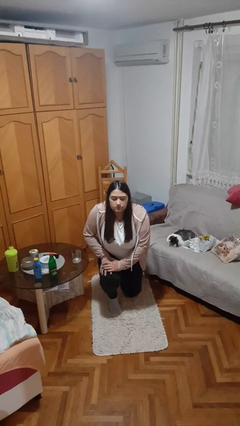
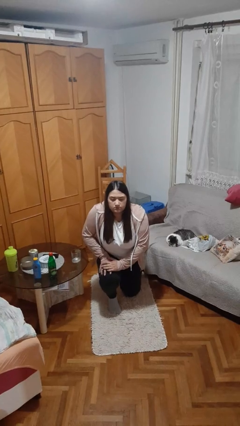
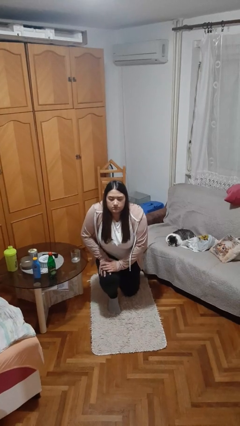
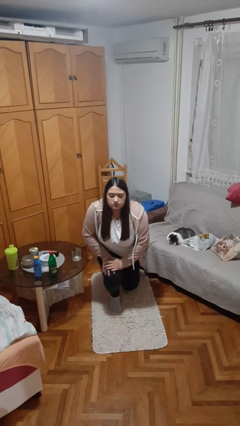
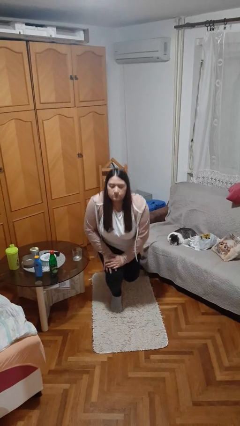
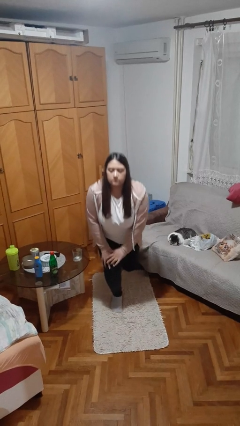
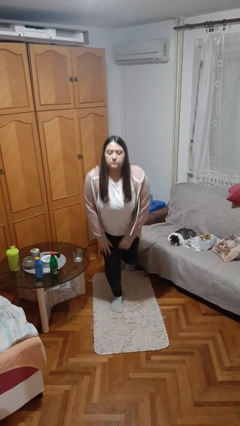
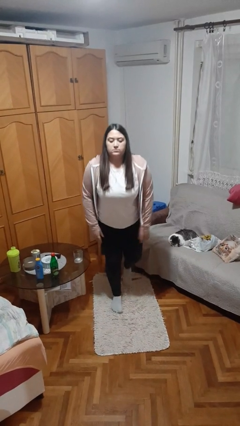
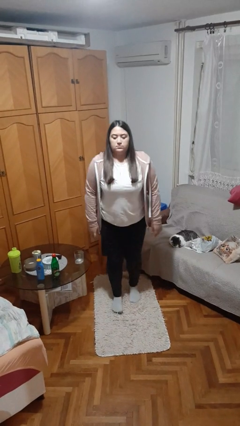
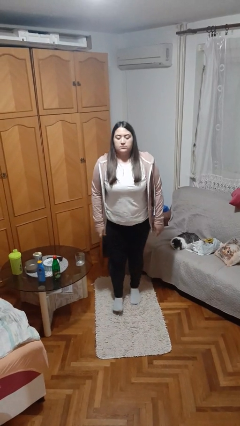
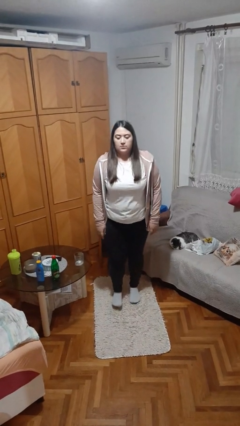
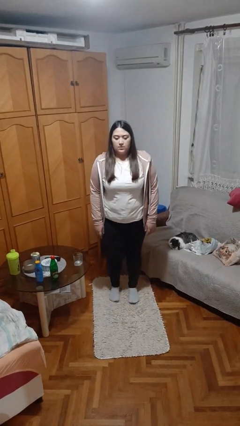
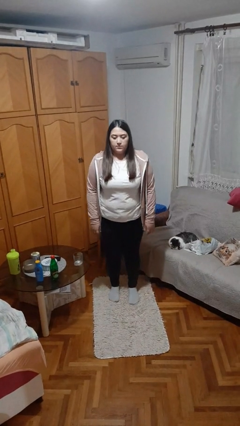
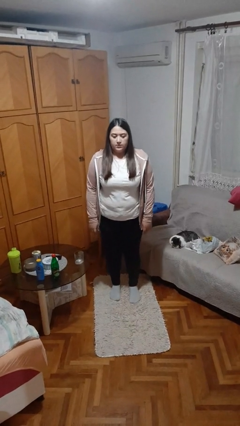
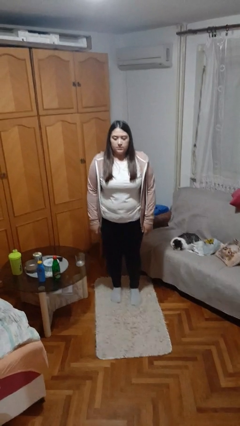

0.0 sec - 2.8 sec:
person stands up from floor

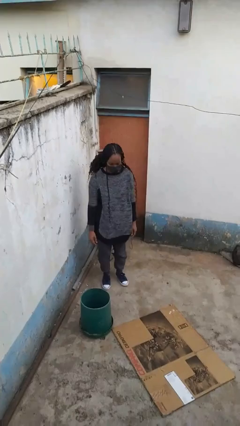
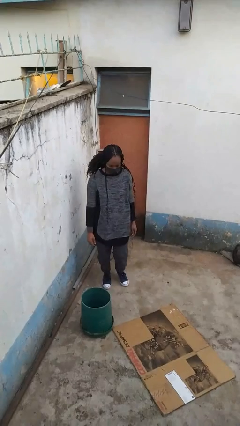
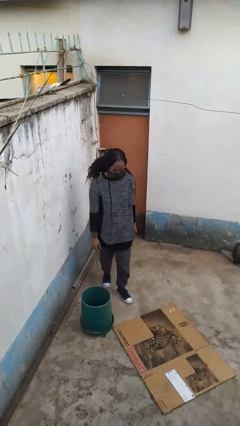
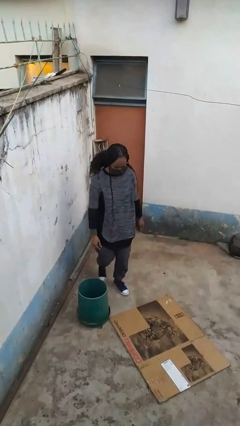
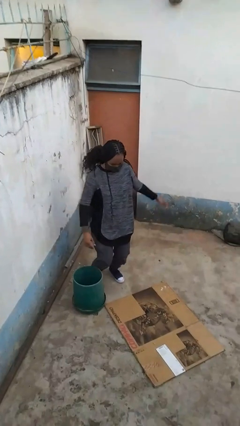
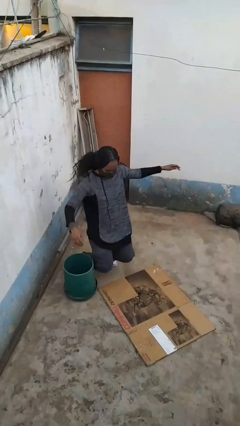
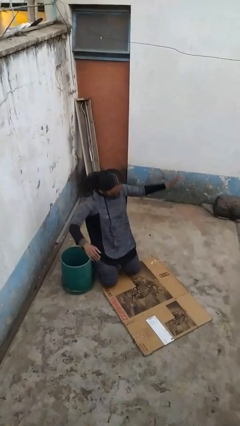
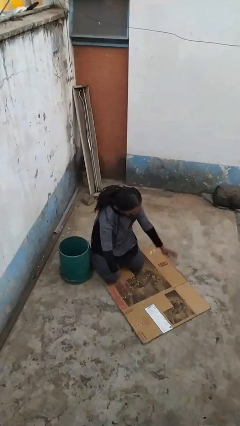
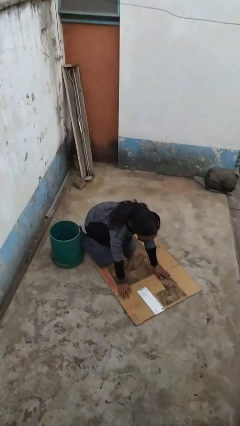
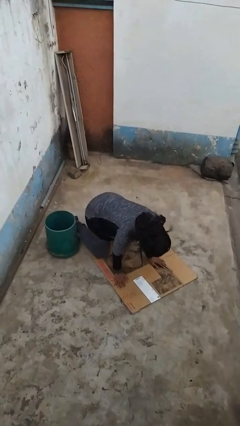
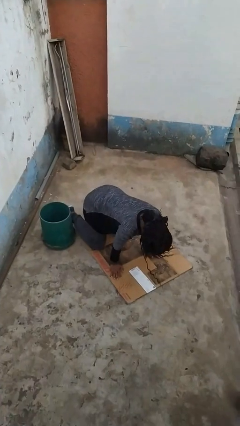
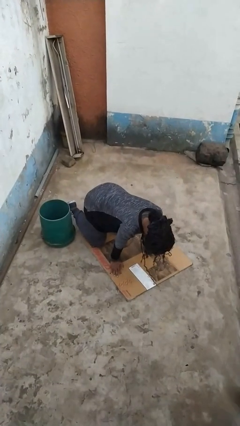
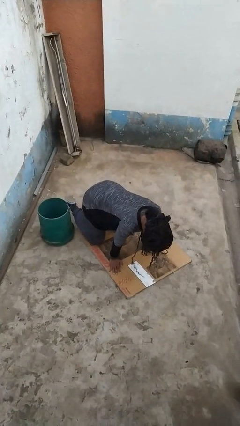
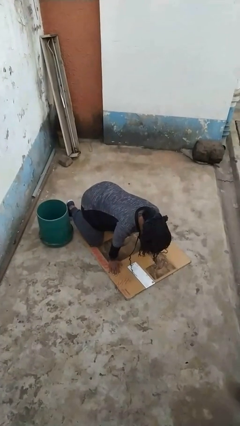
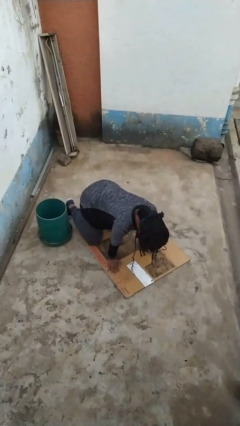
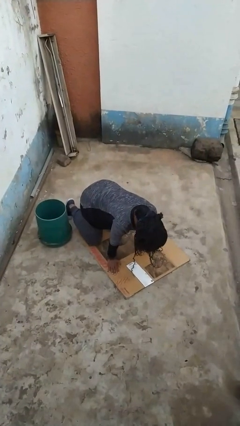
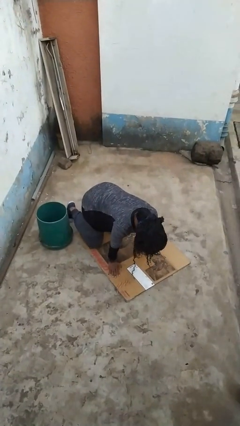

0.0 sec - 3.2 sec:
person trips on object on floor

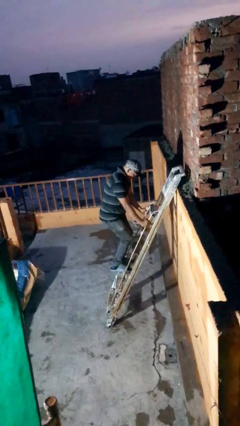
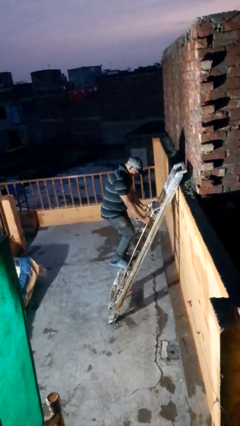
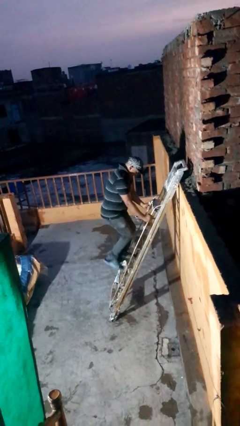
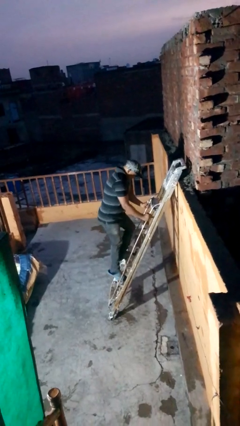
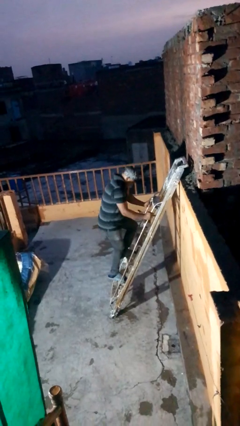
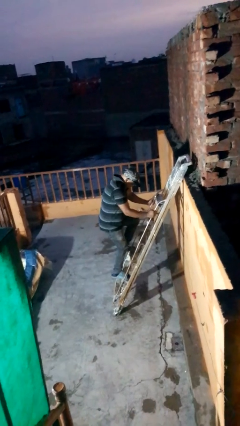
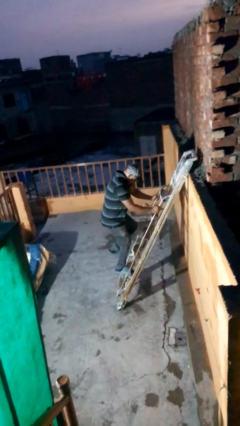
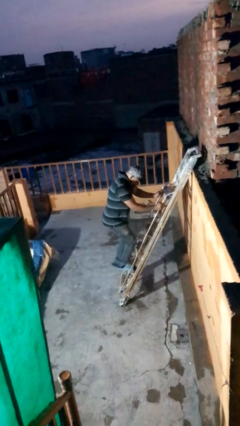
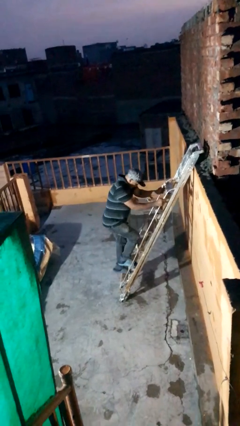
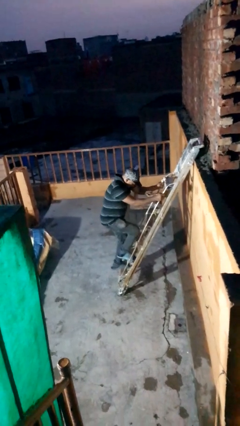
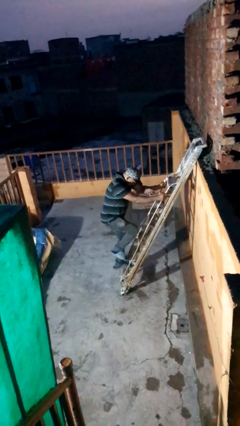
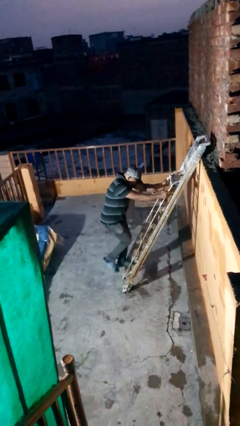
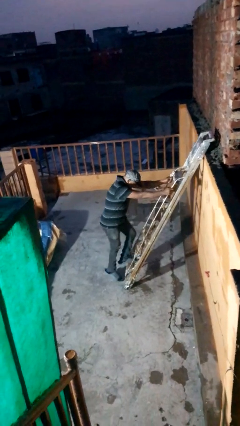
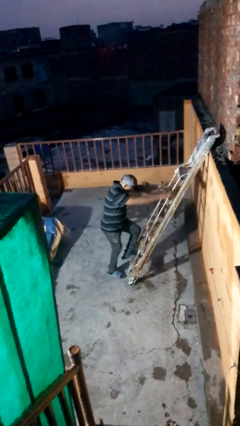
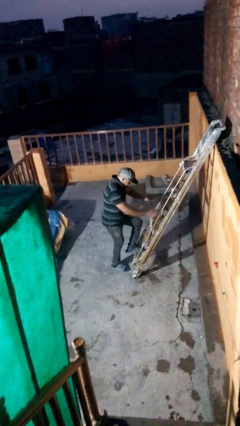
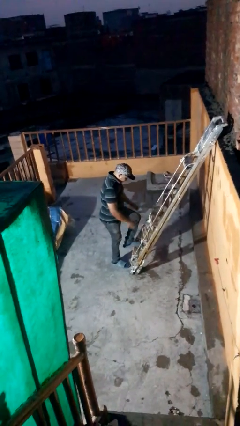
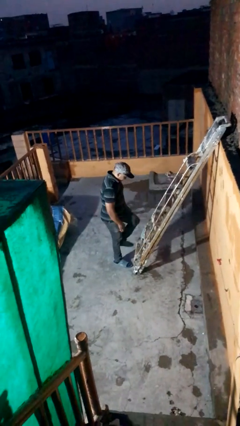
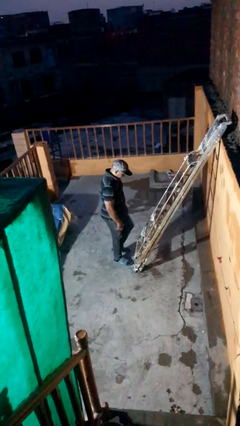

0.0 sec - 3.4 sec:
person climbs down ladder

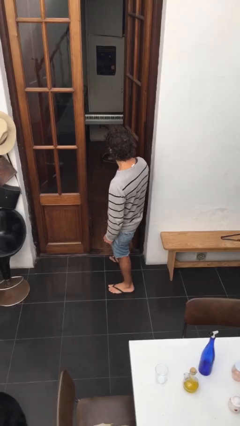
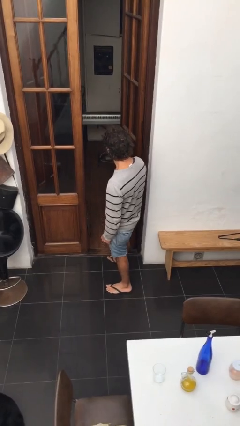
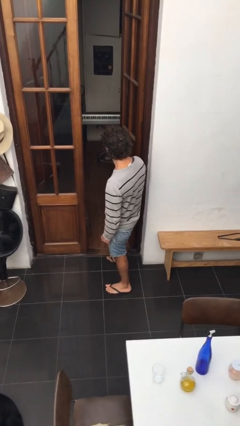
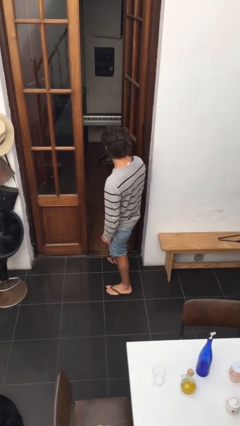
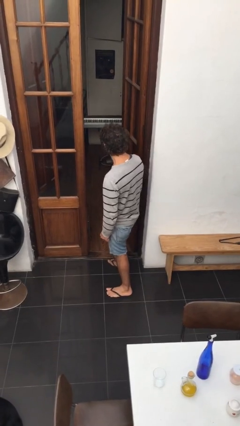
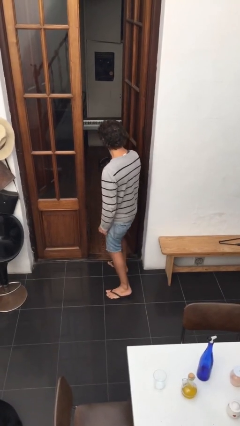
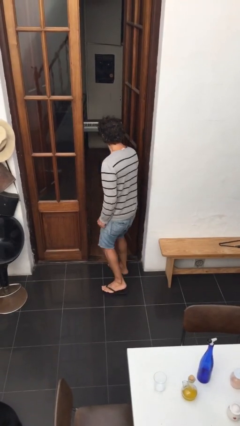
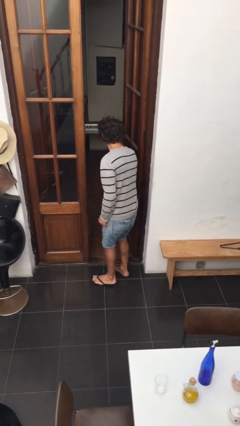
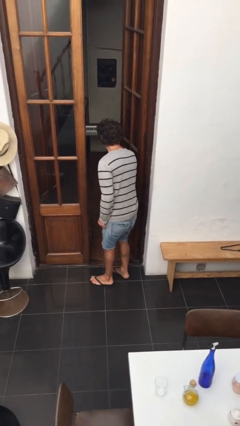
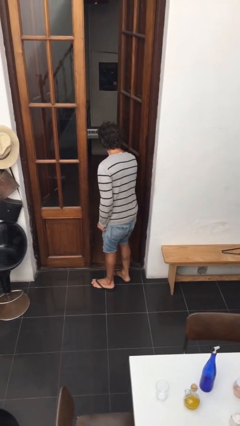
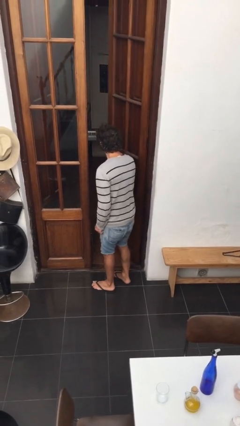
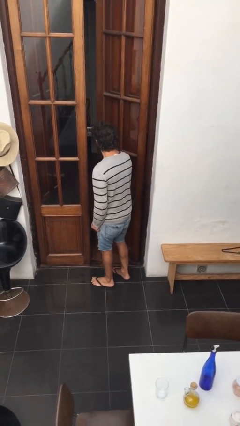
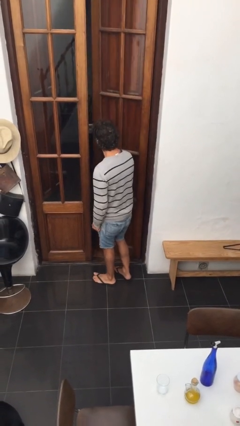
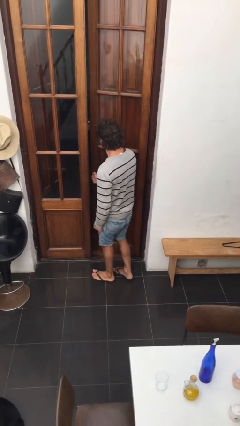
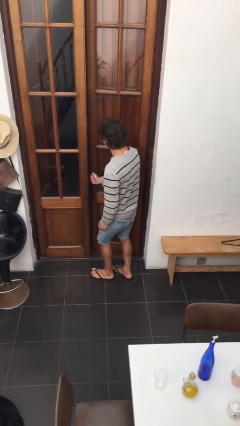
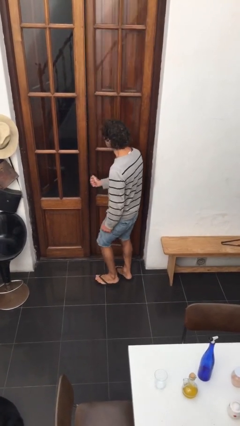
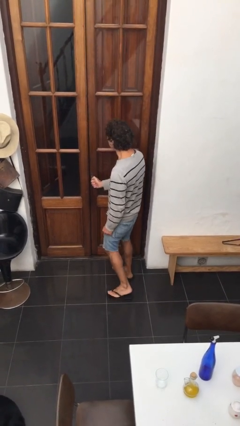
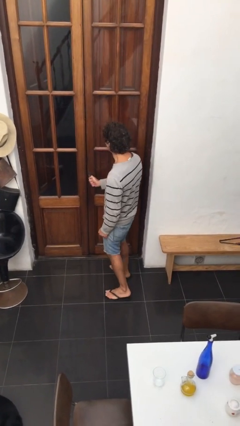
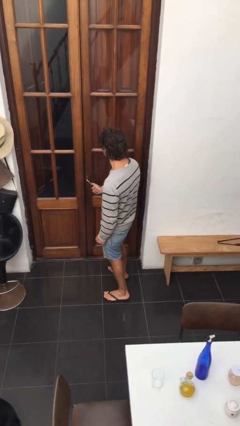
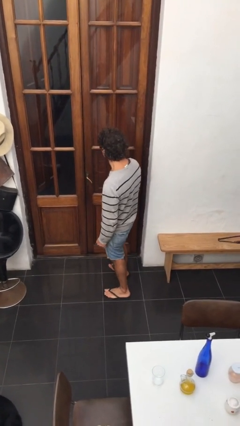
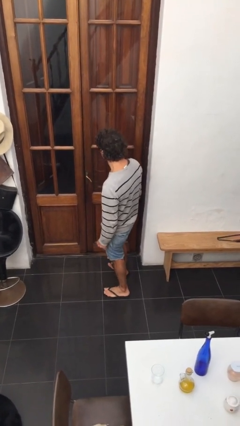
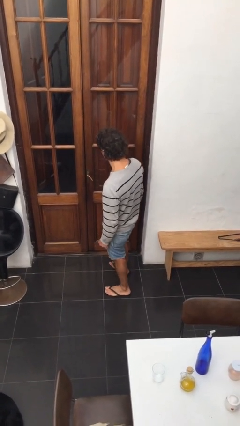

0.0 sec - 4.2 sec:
person closes facility door

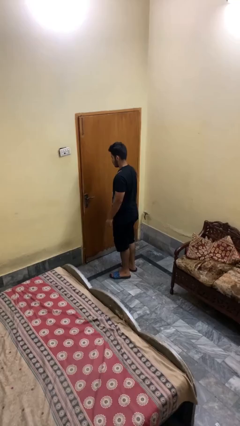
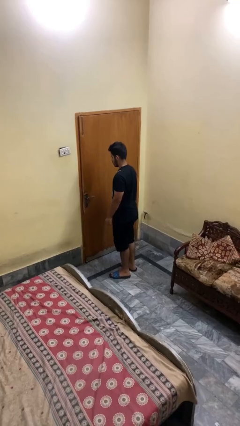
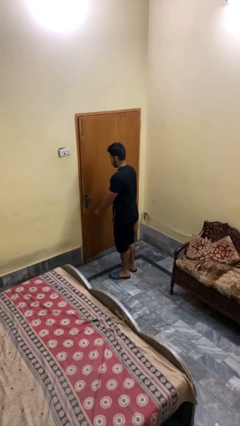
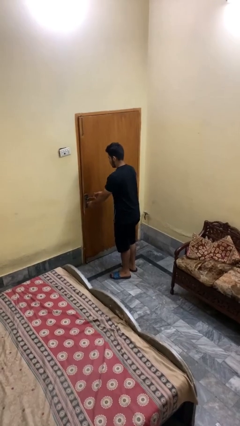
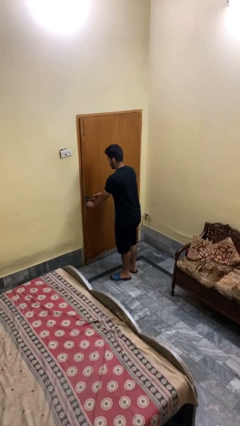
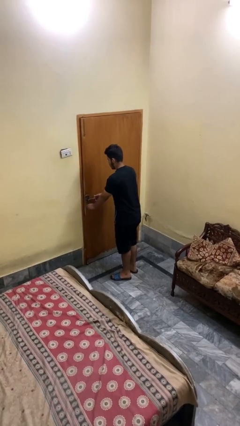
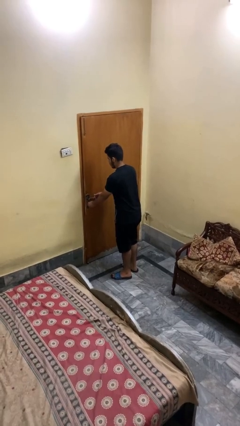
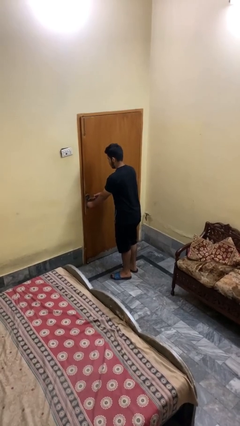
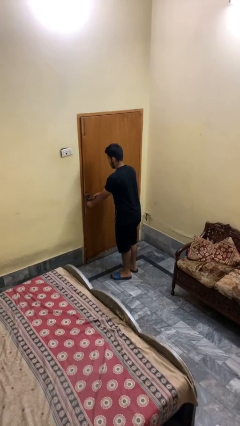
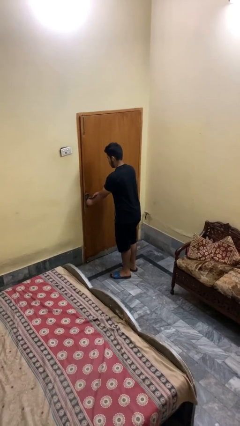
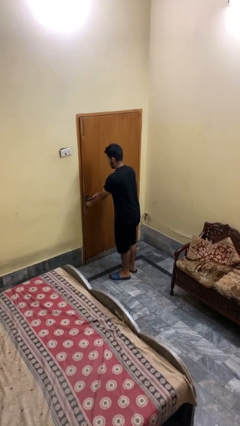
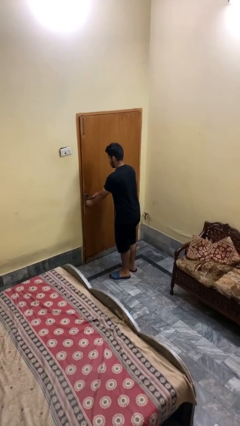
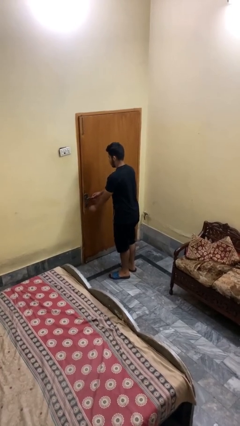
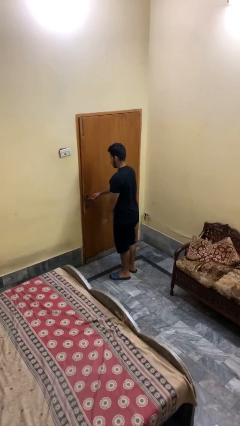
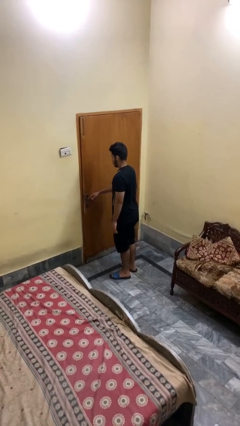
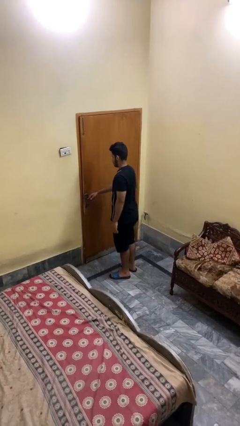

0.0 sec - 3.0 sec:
person unlocks door with keys

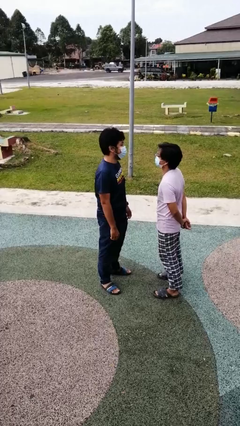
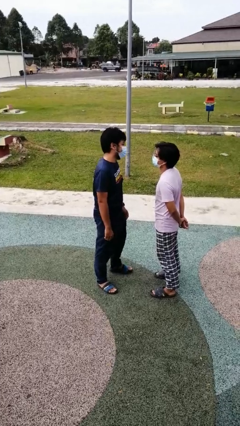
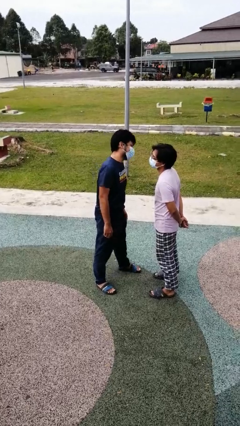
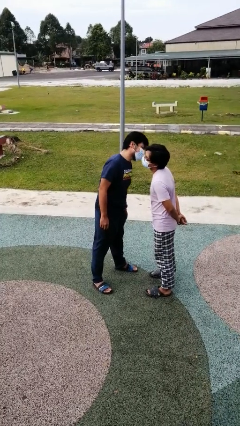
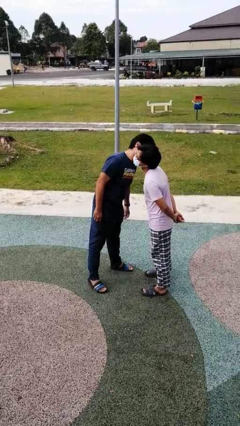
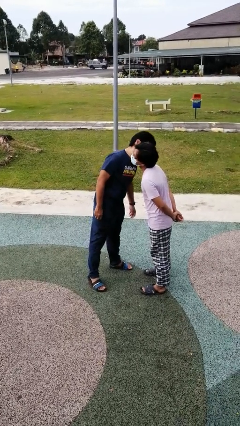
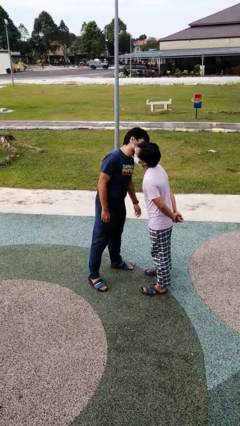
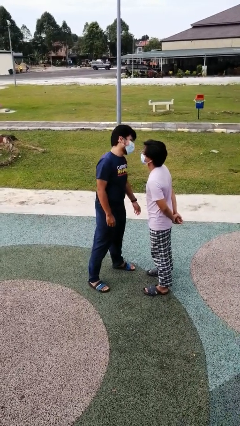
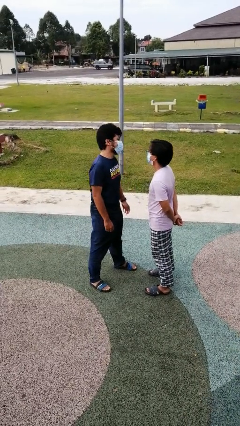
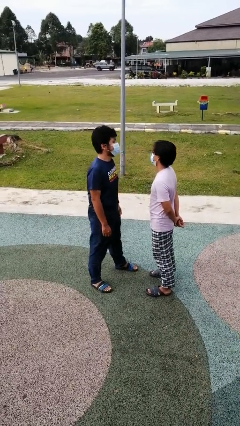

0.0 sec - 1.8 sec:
person kisses cheek of person
